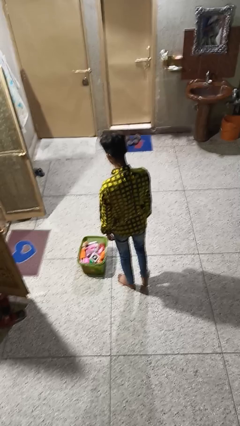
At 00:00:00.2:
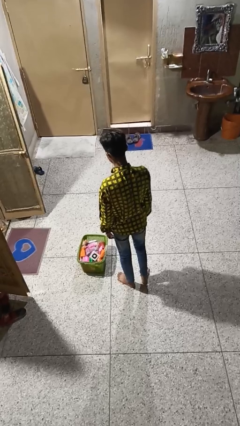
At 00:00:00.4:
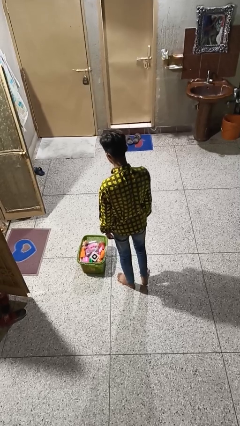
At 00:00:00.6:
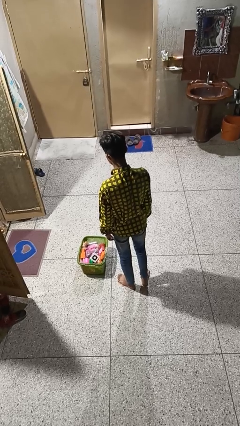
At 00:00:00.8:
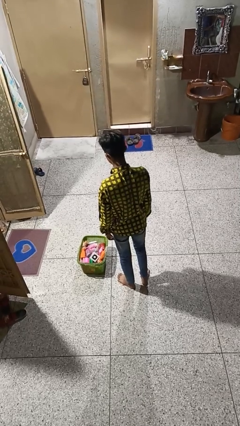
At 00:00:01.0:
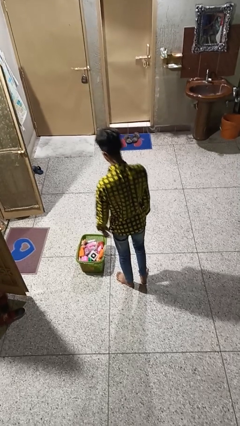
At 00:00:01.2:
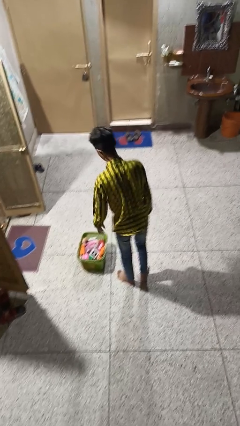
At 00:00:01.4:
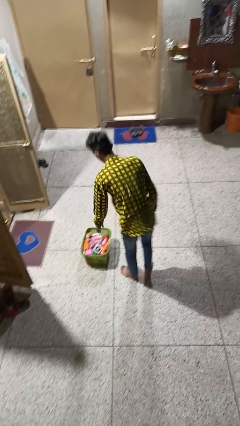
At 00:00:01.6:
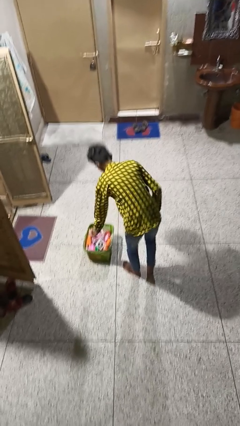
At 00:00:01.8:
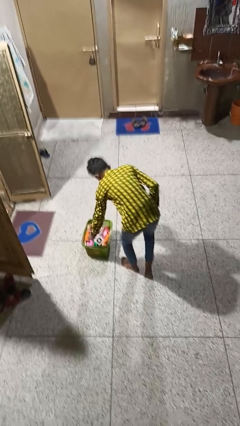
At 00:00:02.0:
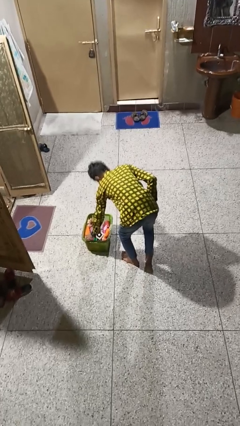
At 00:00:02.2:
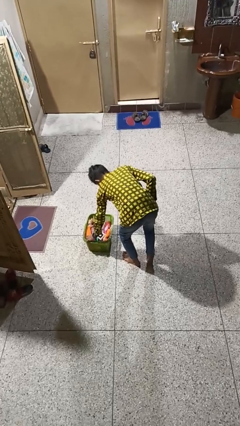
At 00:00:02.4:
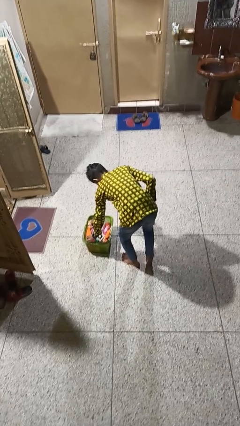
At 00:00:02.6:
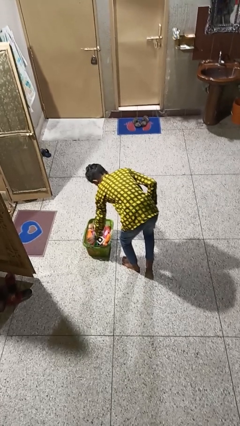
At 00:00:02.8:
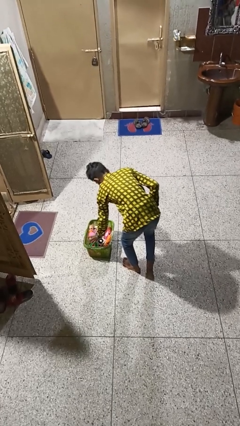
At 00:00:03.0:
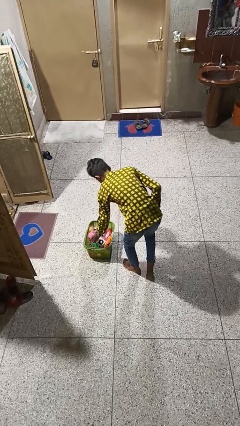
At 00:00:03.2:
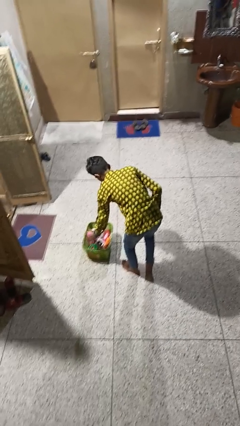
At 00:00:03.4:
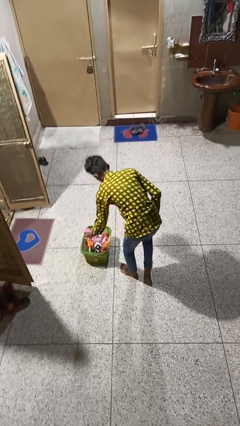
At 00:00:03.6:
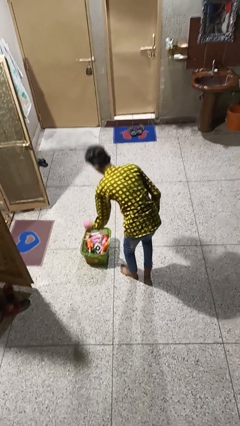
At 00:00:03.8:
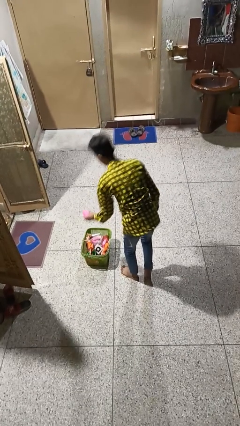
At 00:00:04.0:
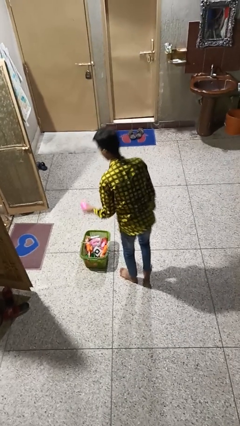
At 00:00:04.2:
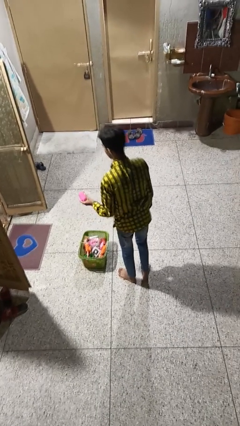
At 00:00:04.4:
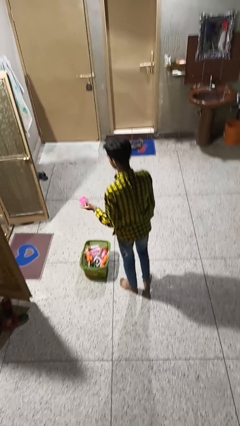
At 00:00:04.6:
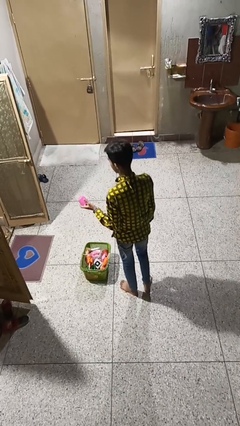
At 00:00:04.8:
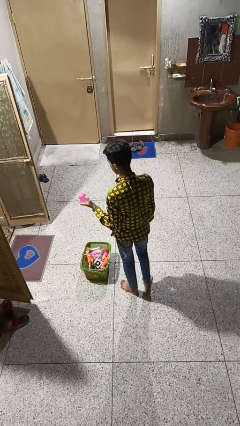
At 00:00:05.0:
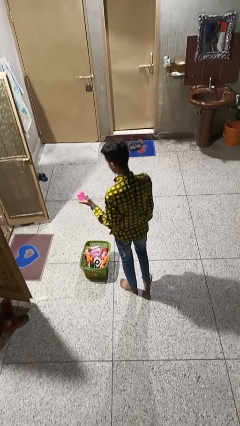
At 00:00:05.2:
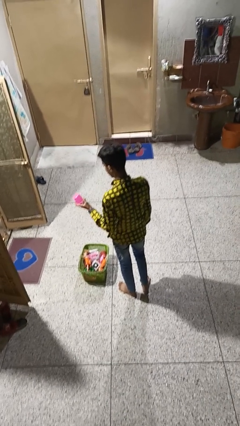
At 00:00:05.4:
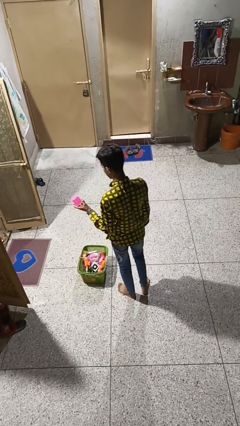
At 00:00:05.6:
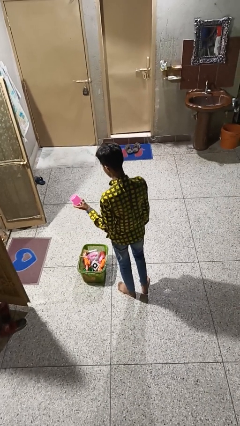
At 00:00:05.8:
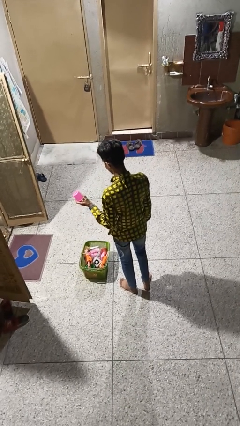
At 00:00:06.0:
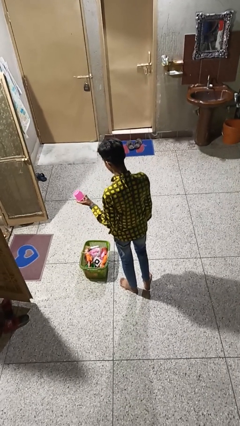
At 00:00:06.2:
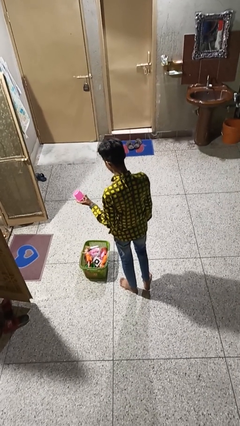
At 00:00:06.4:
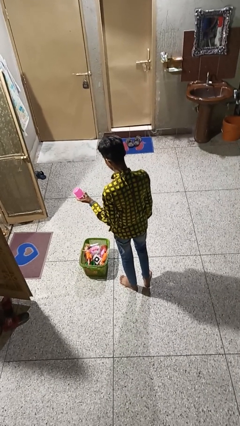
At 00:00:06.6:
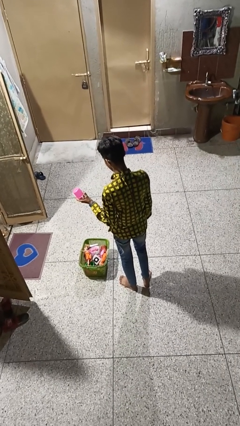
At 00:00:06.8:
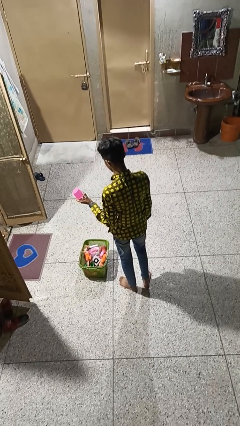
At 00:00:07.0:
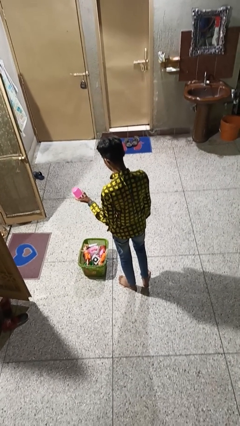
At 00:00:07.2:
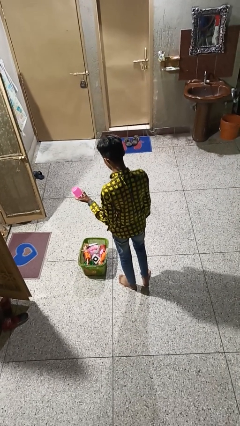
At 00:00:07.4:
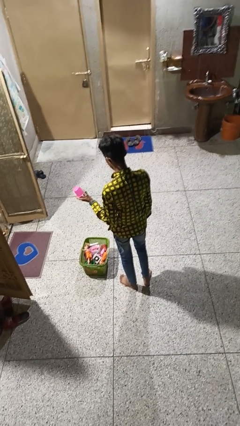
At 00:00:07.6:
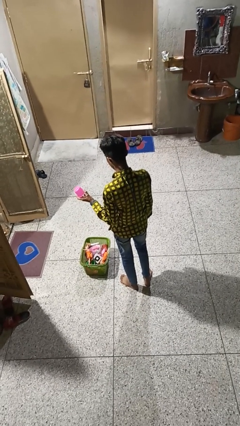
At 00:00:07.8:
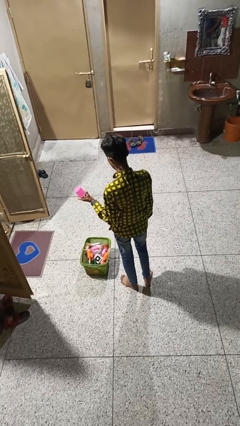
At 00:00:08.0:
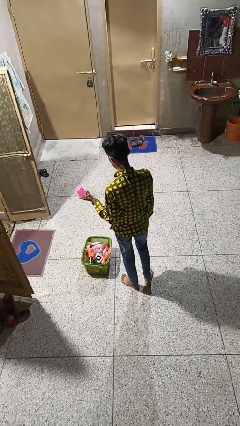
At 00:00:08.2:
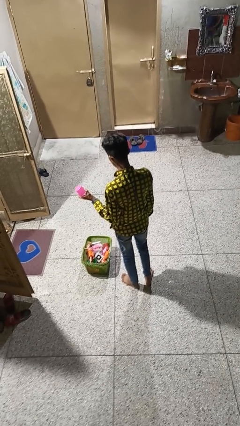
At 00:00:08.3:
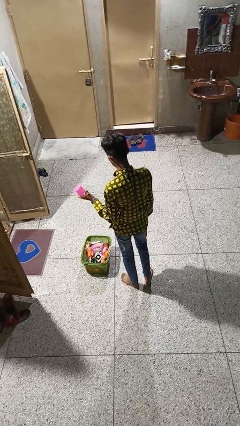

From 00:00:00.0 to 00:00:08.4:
person puts object into basket

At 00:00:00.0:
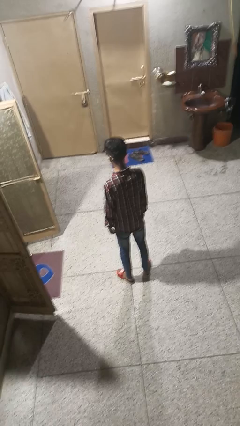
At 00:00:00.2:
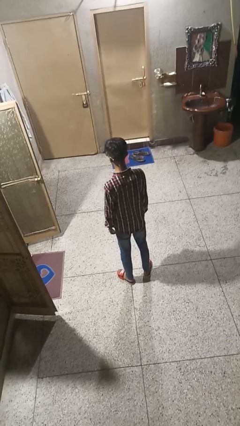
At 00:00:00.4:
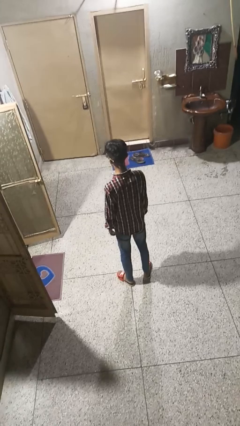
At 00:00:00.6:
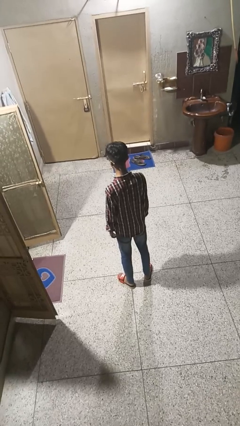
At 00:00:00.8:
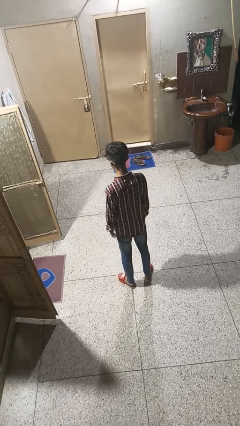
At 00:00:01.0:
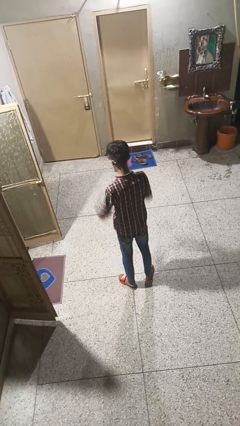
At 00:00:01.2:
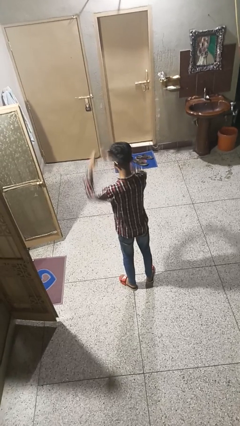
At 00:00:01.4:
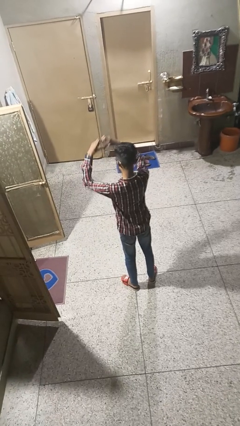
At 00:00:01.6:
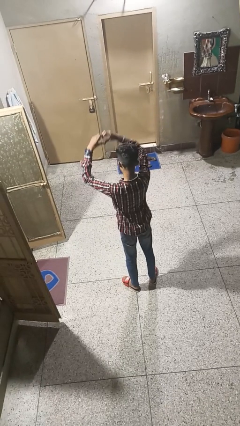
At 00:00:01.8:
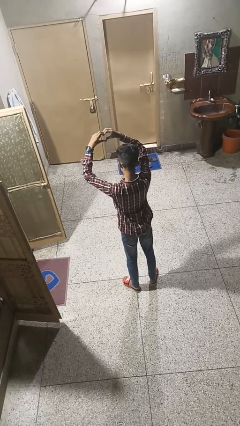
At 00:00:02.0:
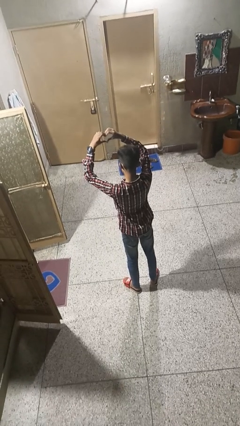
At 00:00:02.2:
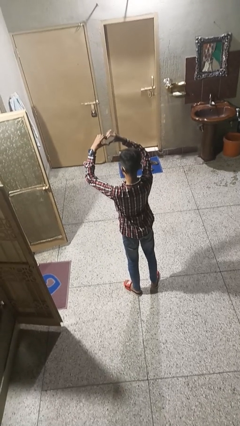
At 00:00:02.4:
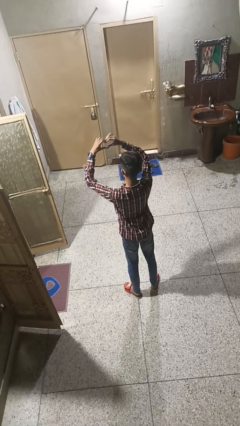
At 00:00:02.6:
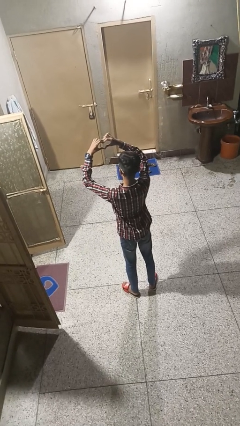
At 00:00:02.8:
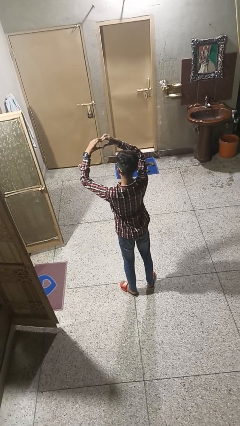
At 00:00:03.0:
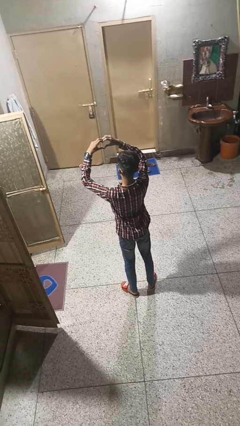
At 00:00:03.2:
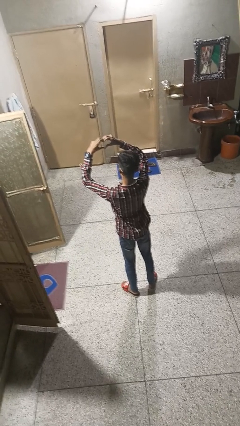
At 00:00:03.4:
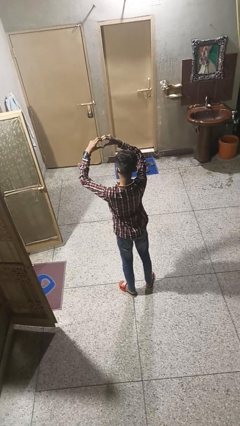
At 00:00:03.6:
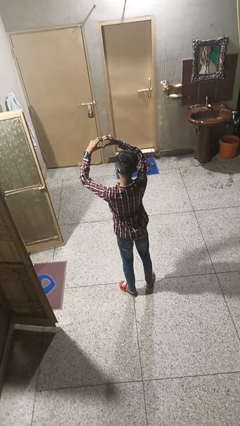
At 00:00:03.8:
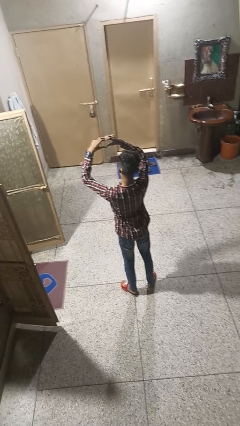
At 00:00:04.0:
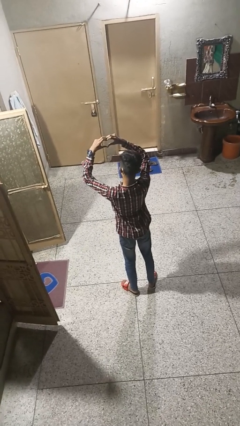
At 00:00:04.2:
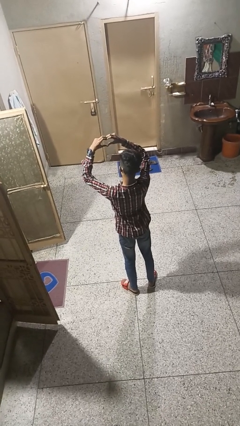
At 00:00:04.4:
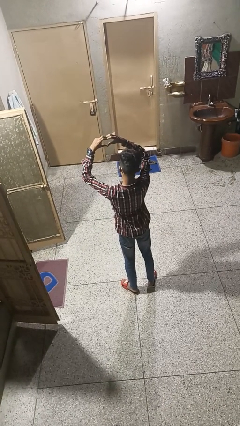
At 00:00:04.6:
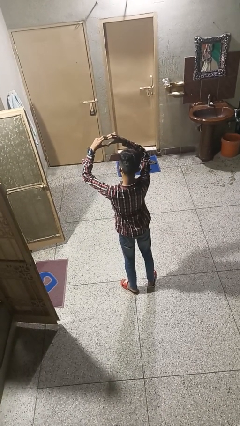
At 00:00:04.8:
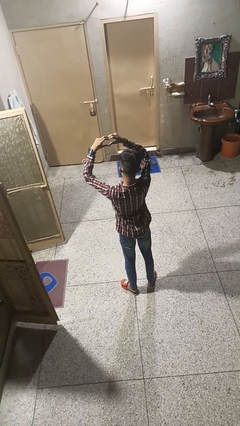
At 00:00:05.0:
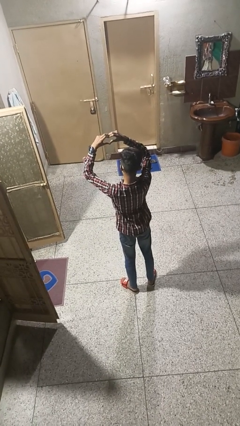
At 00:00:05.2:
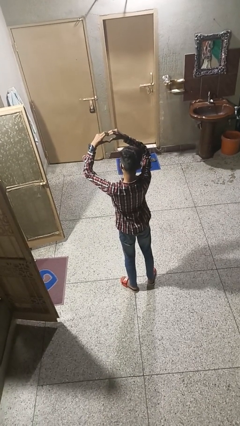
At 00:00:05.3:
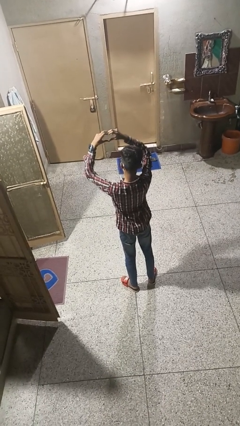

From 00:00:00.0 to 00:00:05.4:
person gestures heart

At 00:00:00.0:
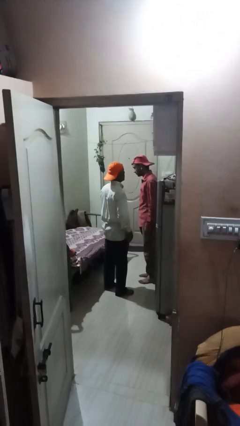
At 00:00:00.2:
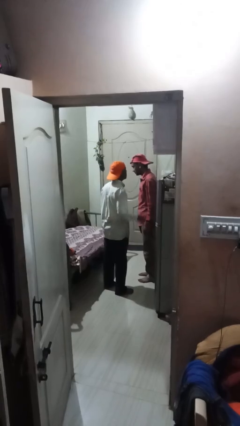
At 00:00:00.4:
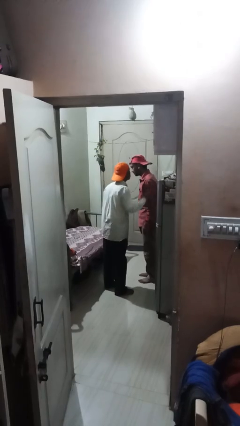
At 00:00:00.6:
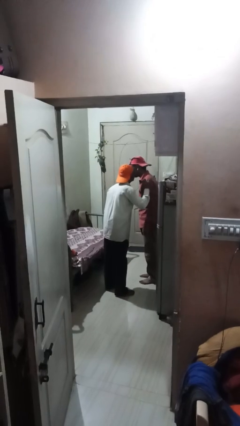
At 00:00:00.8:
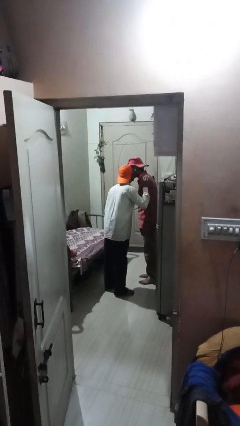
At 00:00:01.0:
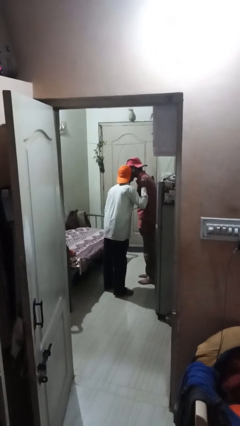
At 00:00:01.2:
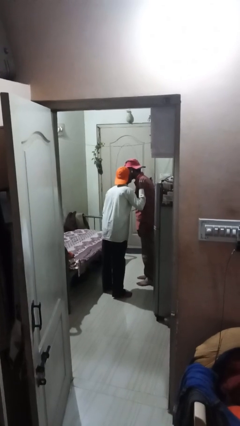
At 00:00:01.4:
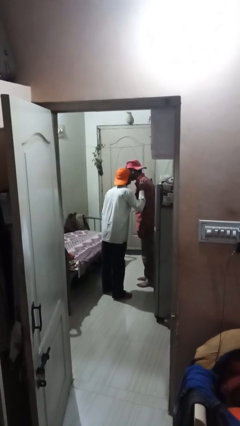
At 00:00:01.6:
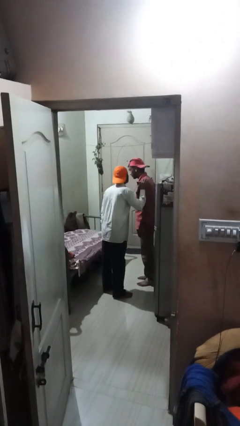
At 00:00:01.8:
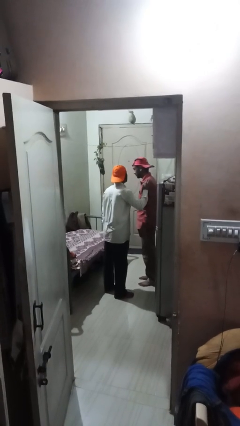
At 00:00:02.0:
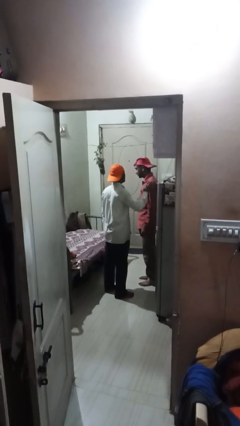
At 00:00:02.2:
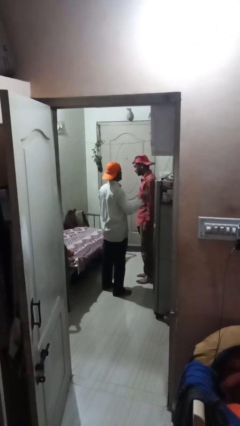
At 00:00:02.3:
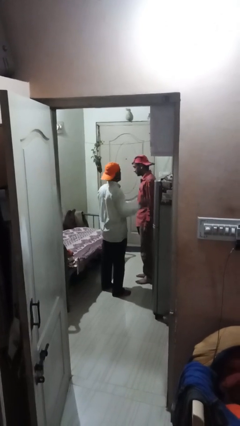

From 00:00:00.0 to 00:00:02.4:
person kisses cheek of person

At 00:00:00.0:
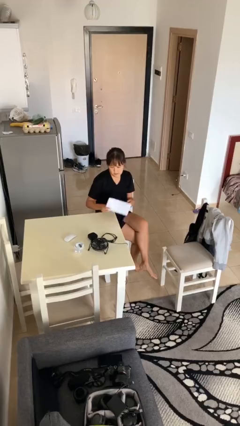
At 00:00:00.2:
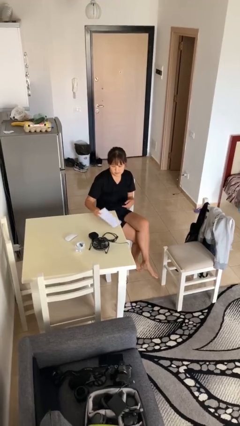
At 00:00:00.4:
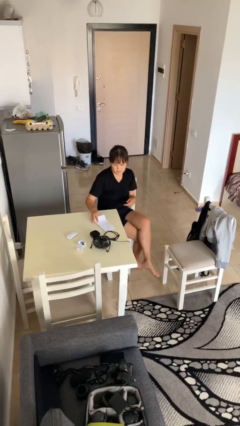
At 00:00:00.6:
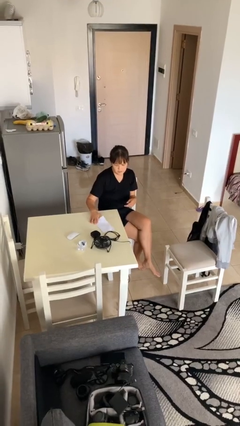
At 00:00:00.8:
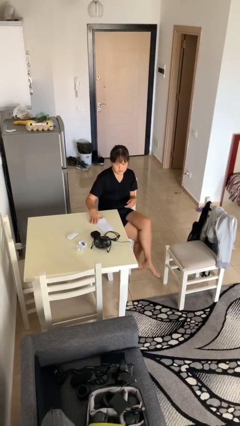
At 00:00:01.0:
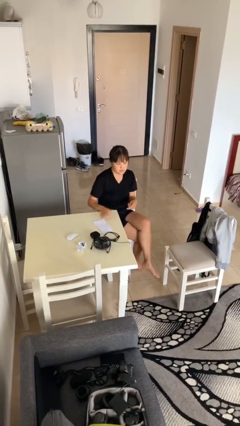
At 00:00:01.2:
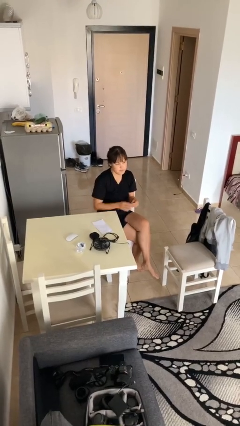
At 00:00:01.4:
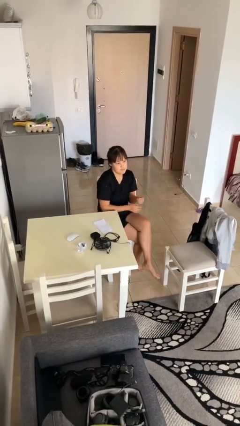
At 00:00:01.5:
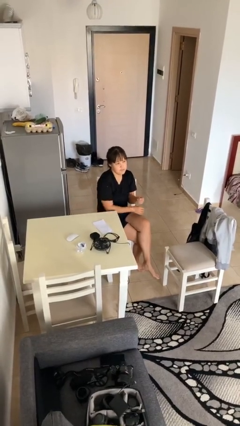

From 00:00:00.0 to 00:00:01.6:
person puts down object on table
